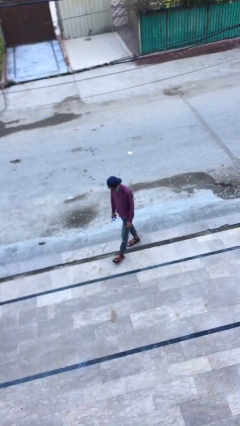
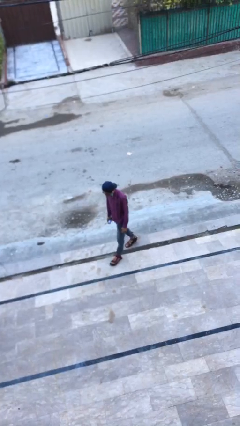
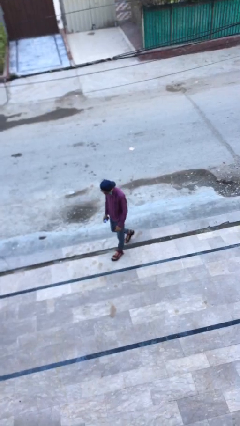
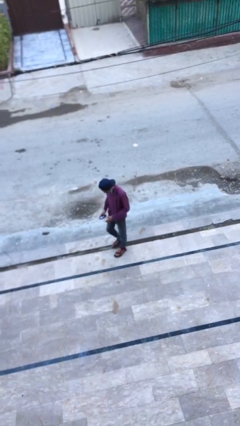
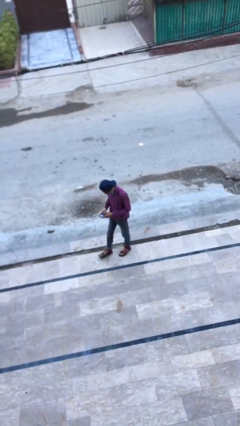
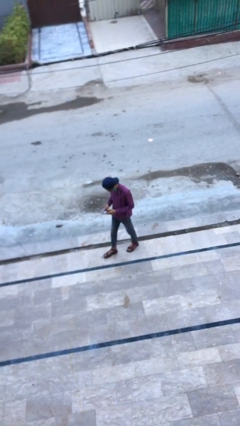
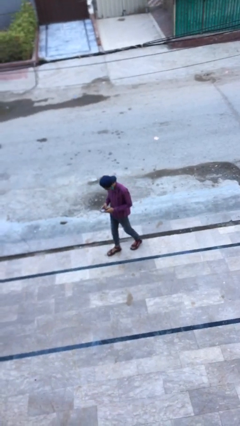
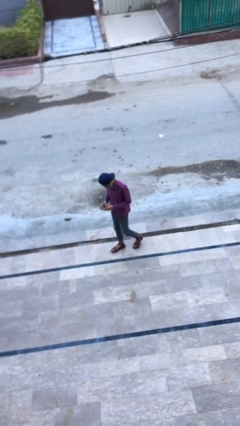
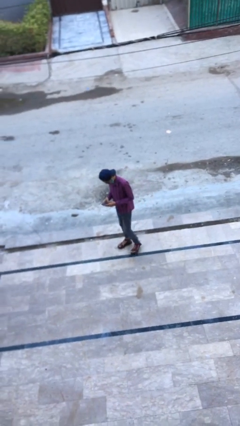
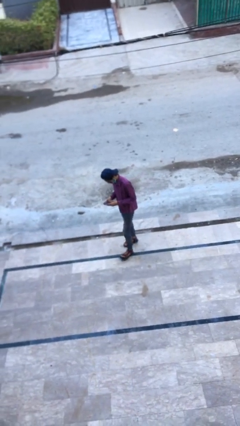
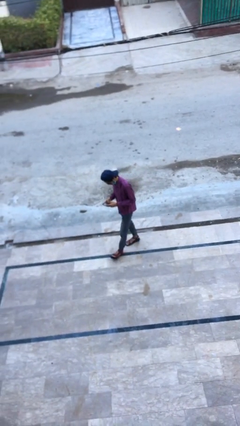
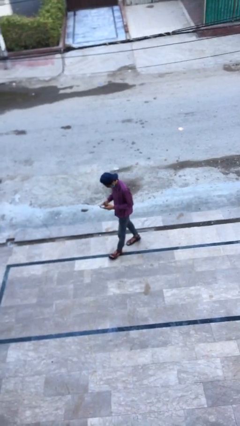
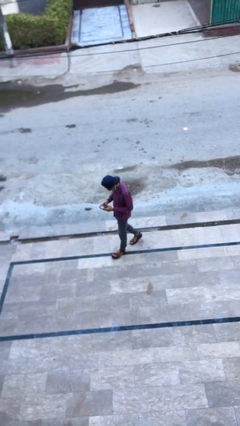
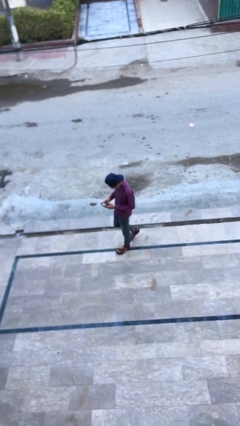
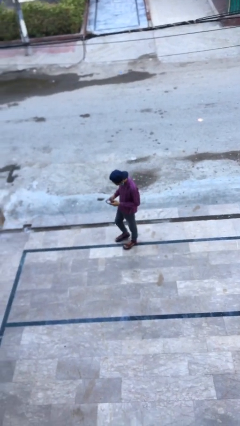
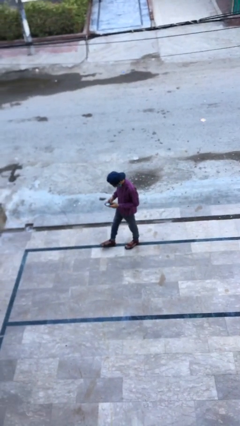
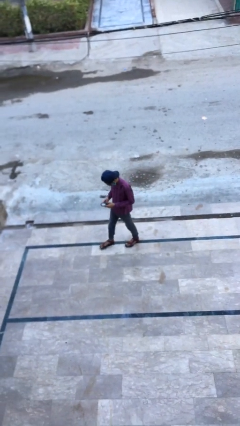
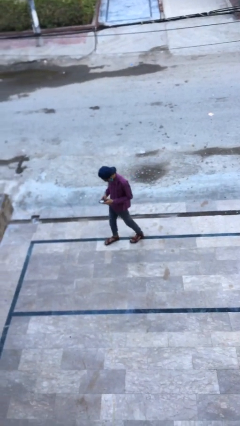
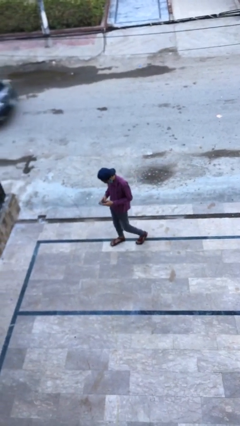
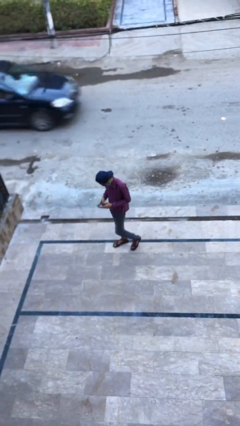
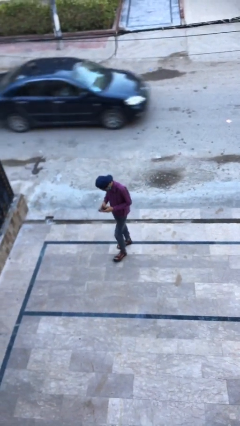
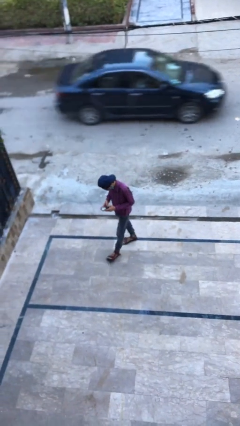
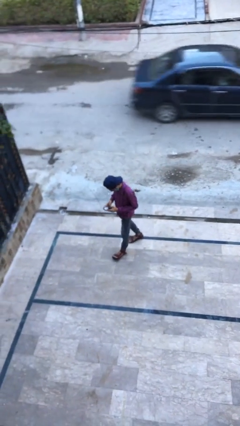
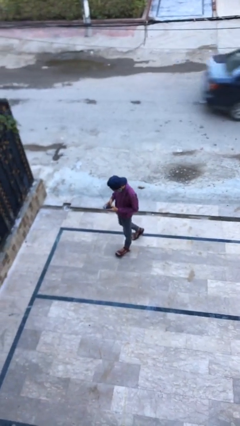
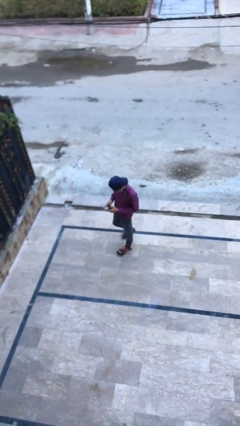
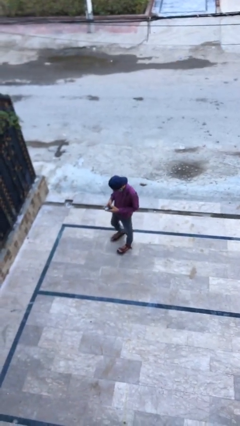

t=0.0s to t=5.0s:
person texts on phone

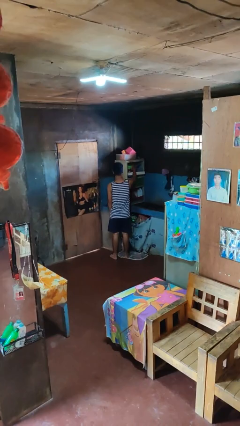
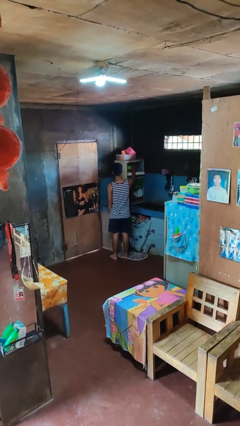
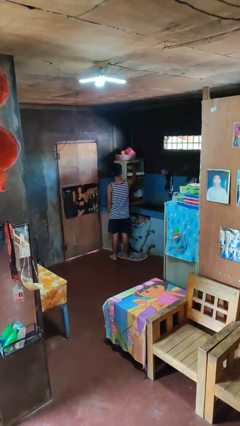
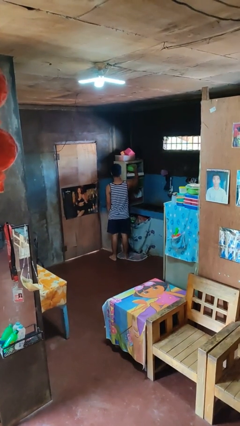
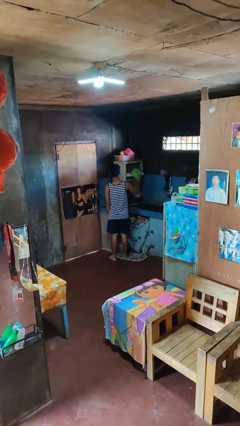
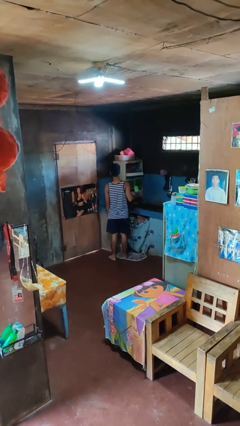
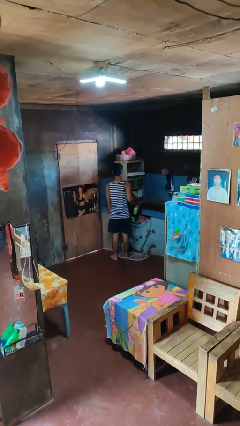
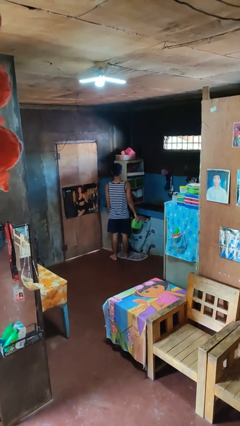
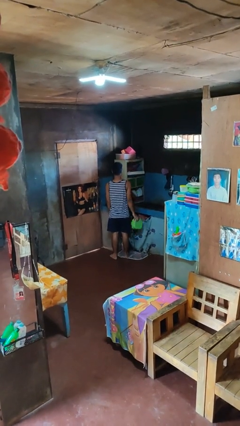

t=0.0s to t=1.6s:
person takes object from cabinet

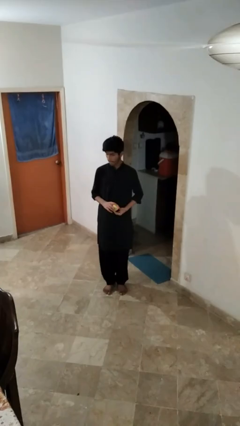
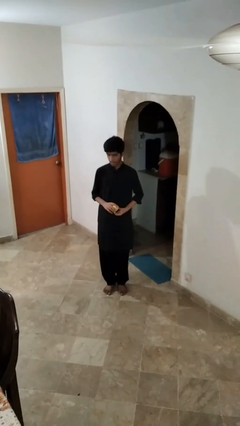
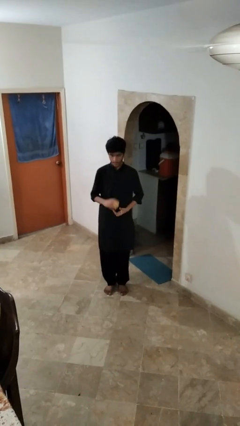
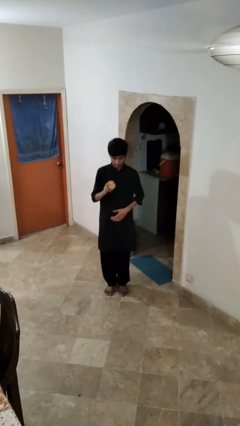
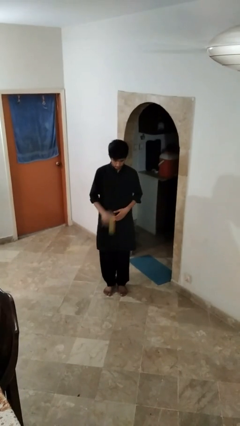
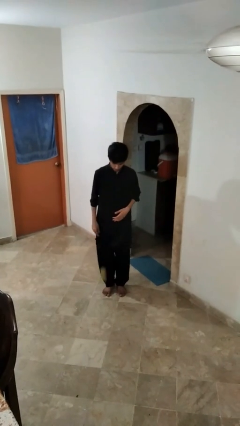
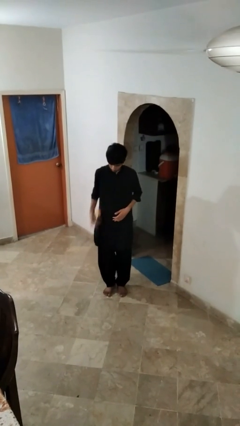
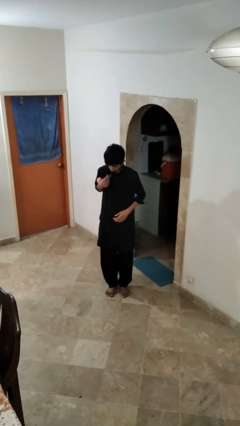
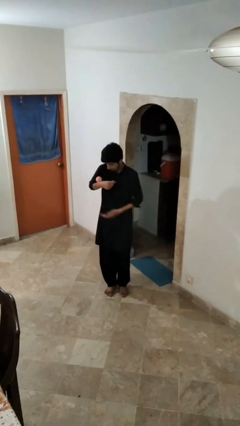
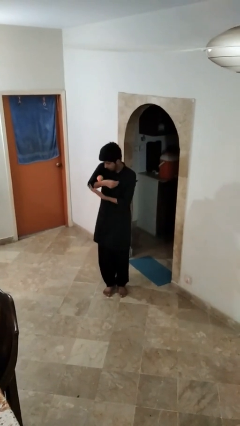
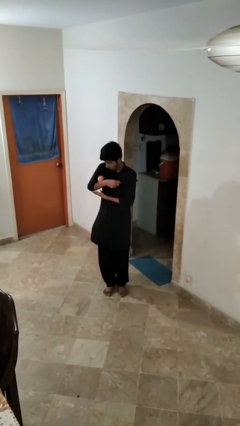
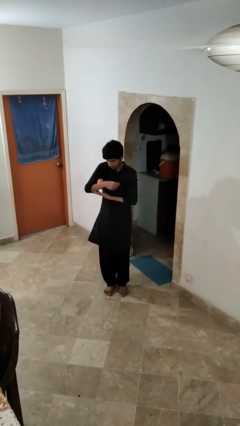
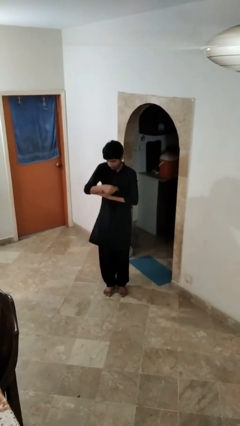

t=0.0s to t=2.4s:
person bounces ball on floor

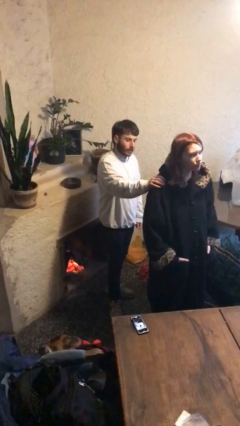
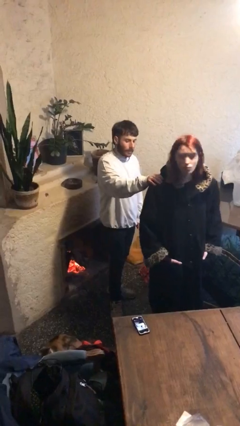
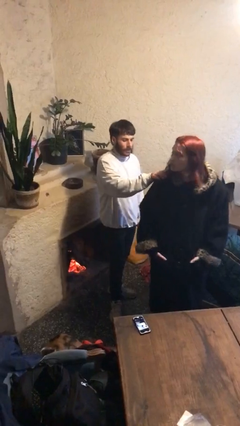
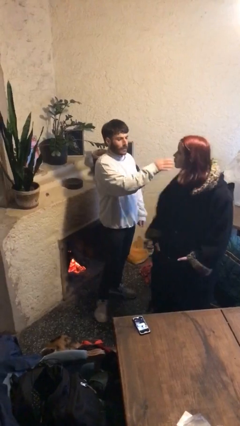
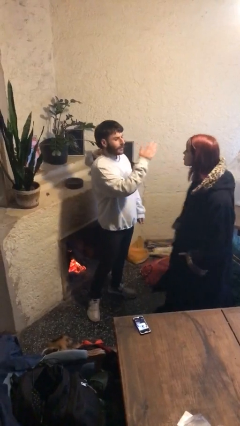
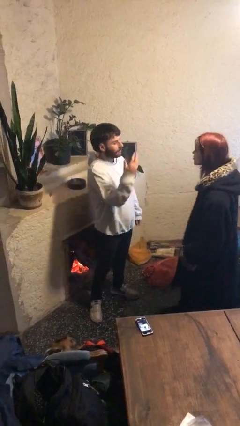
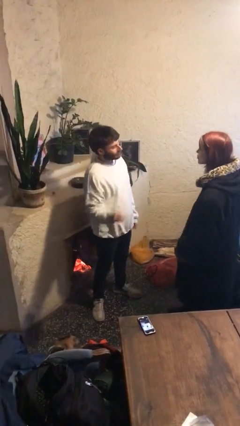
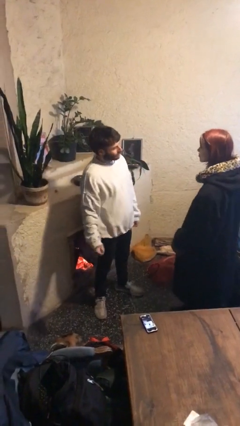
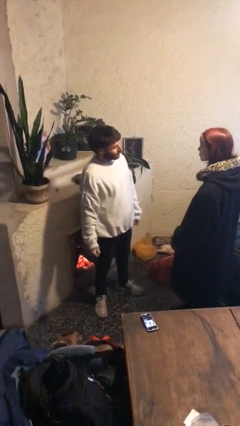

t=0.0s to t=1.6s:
person spins person around

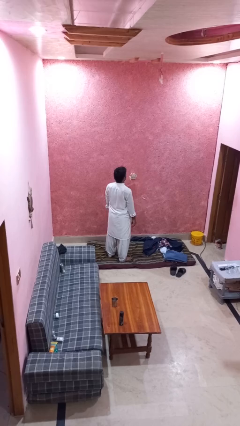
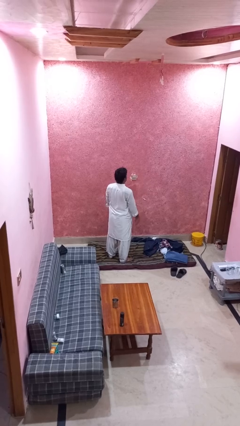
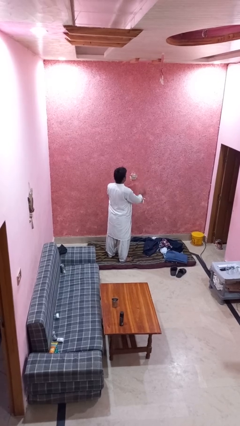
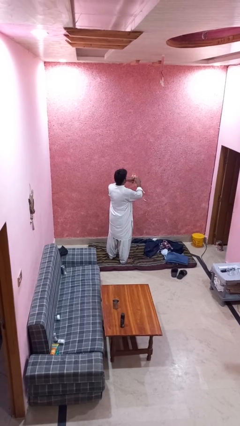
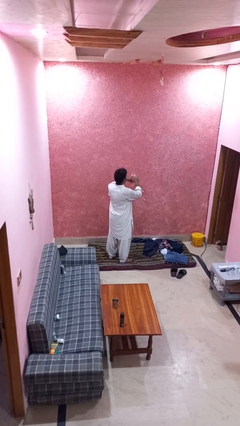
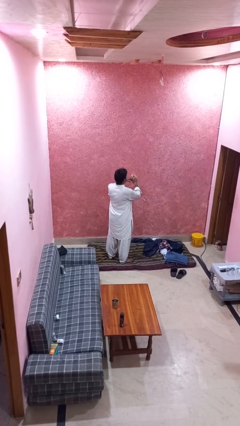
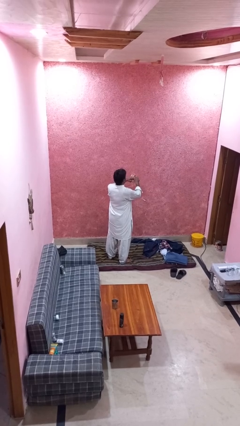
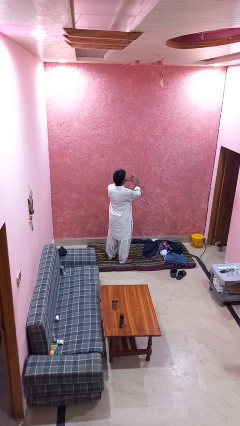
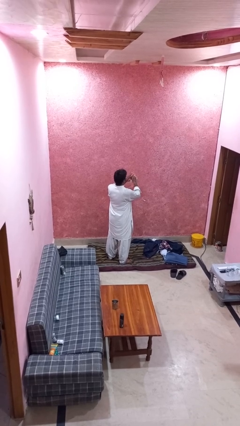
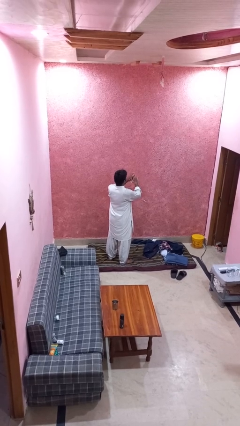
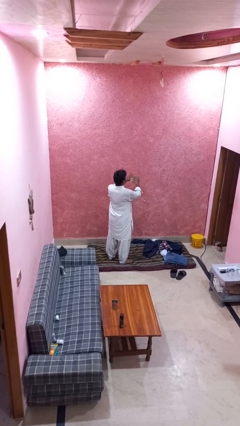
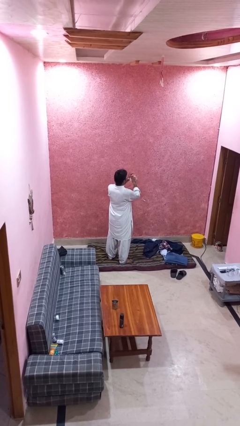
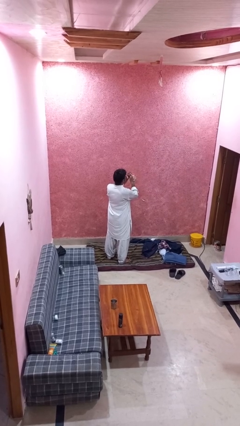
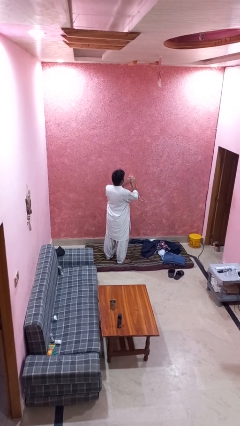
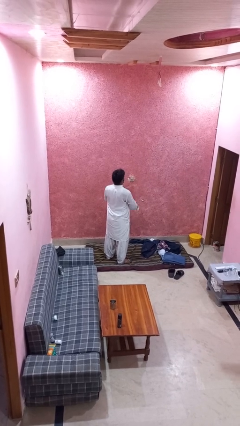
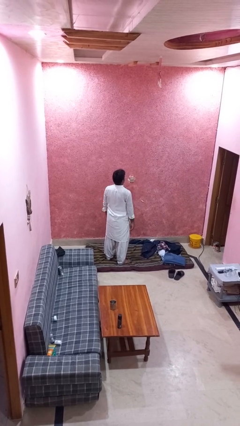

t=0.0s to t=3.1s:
person snaps fingers

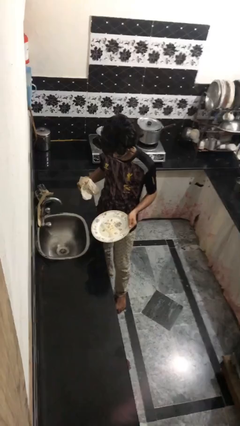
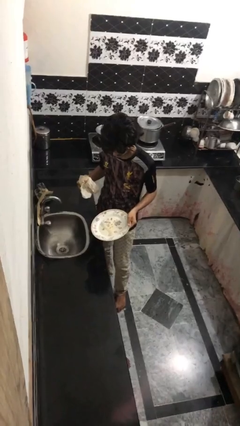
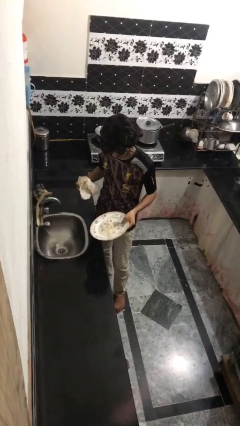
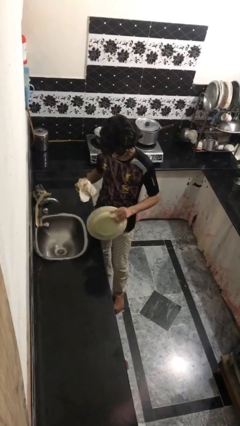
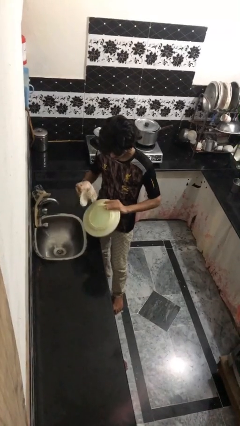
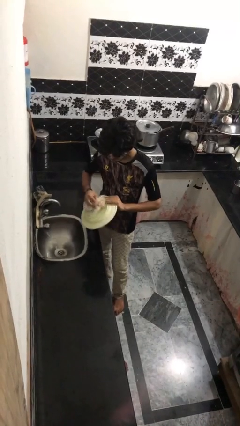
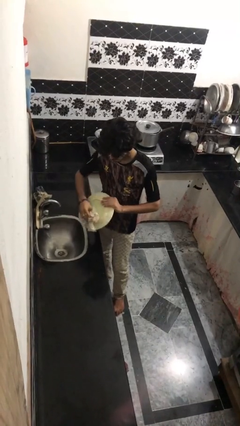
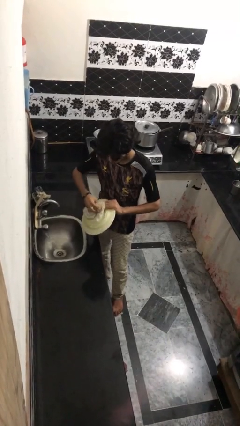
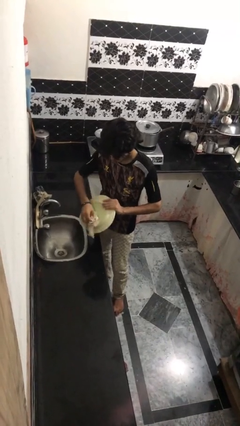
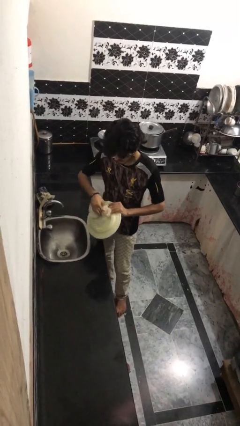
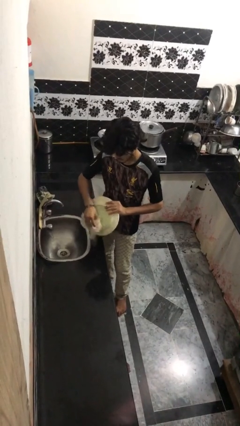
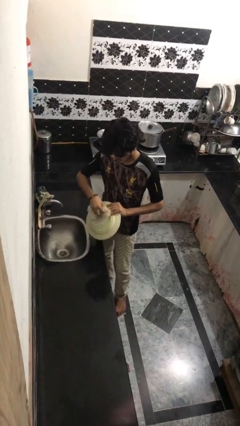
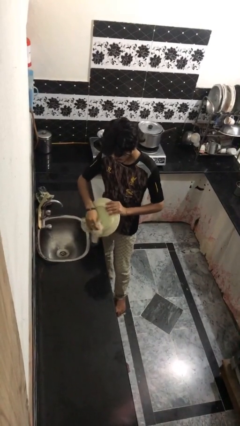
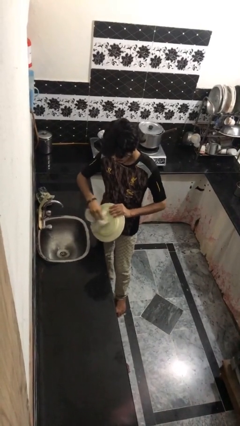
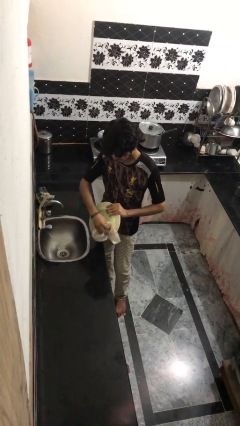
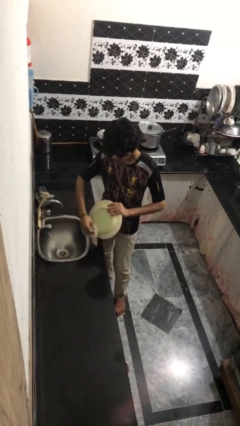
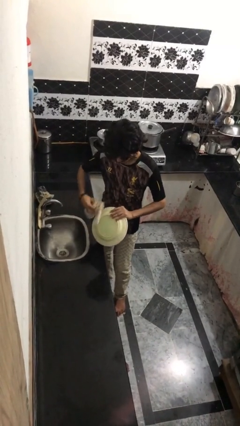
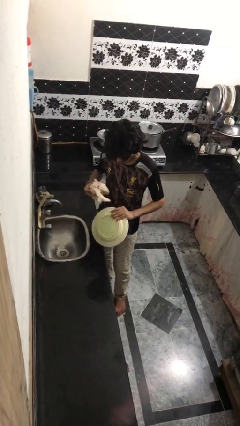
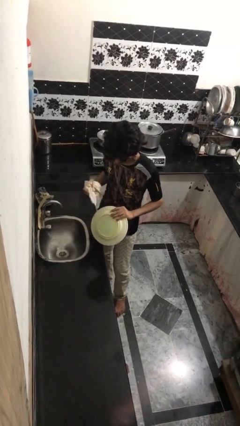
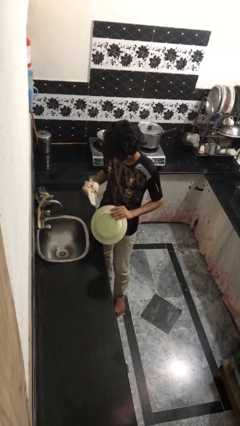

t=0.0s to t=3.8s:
person dries dish
